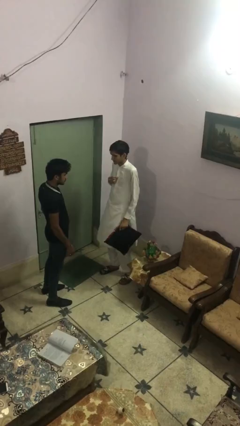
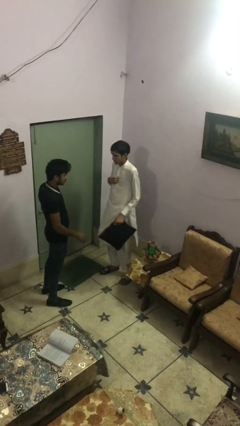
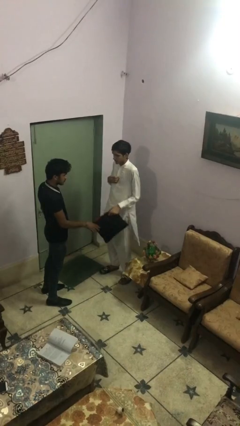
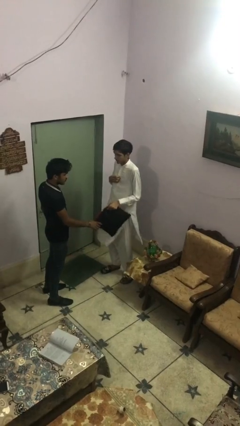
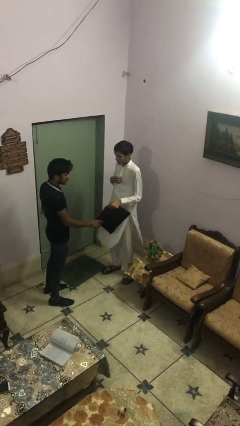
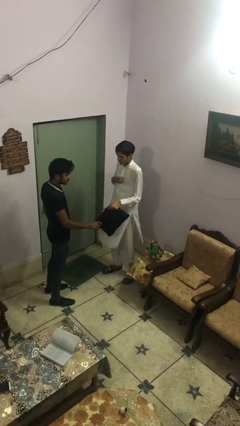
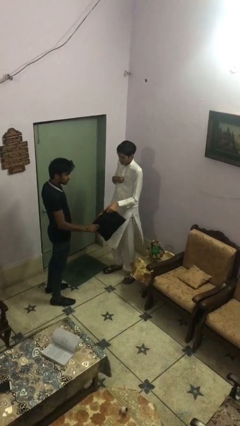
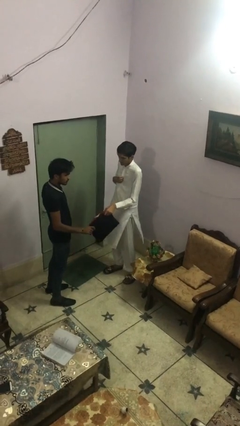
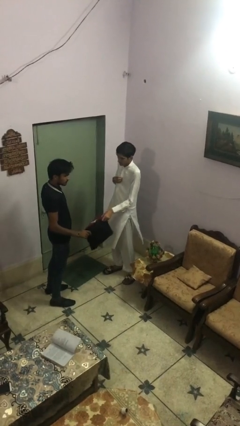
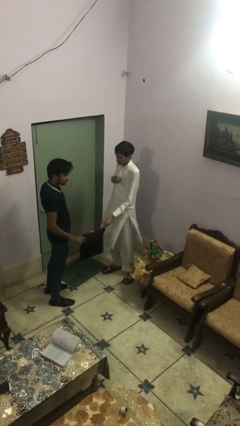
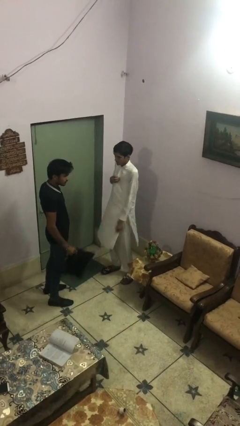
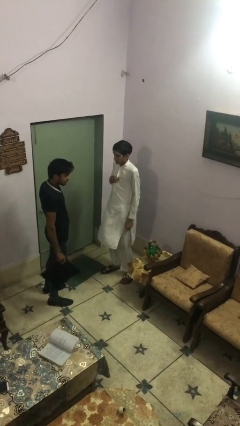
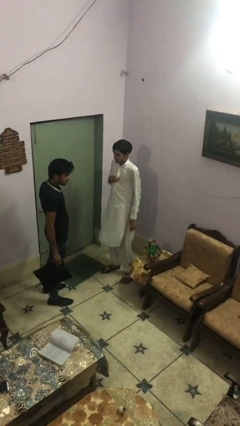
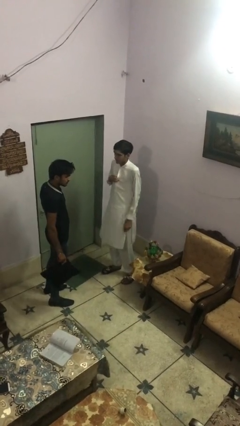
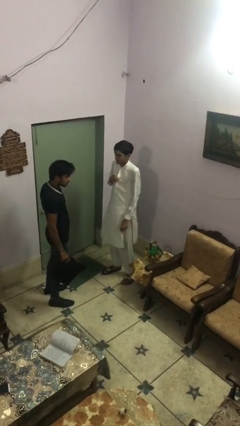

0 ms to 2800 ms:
person transfers object to person

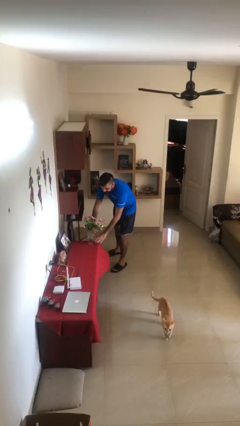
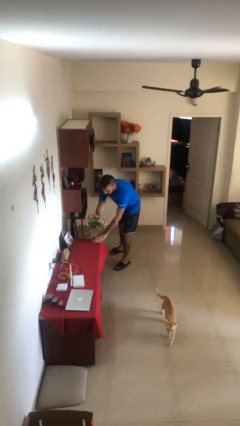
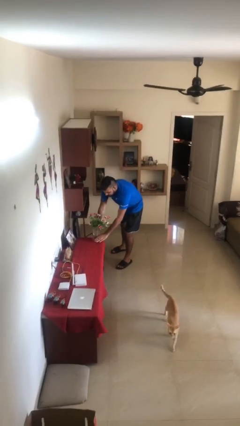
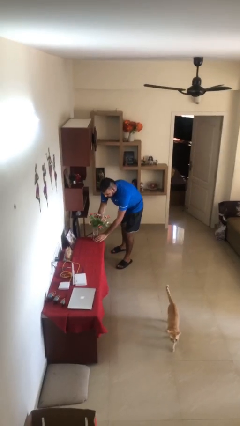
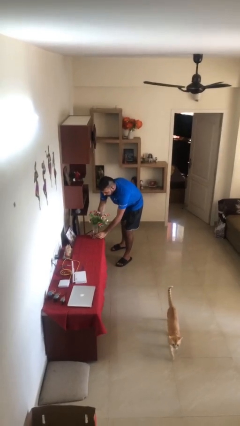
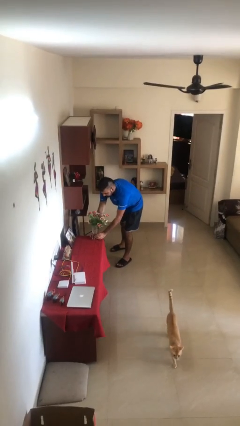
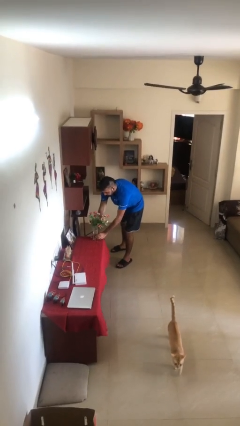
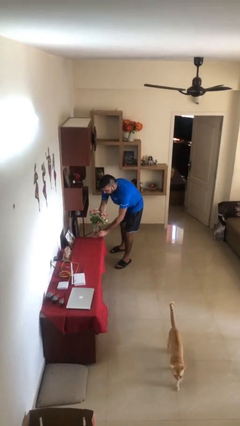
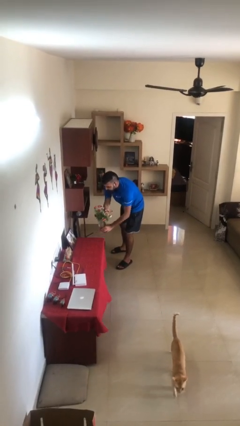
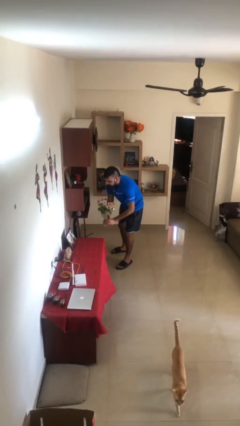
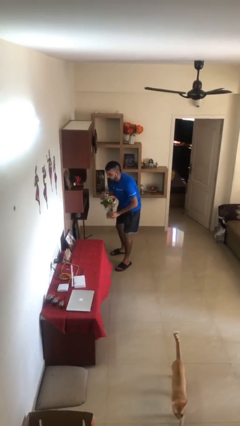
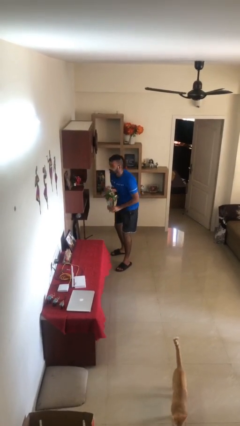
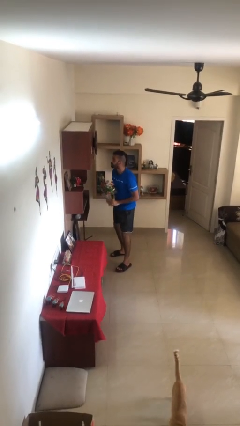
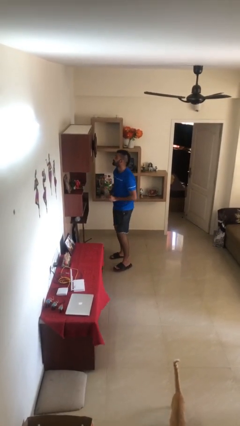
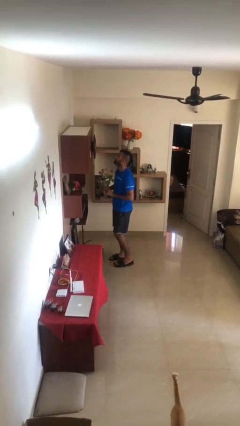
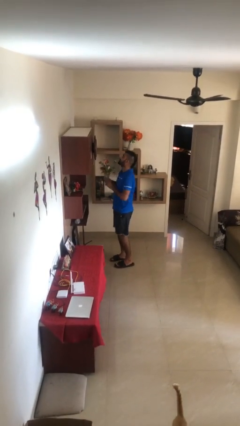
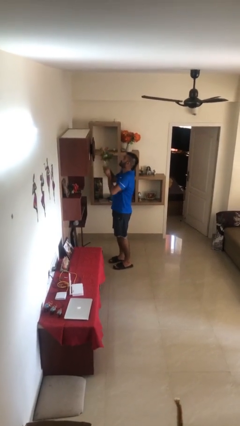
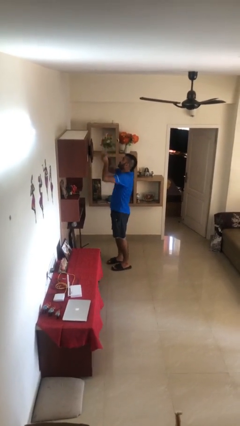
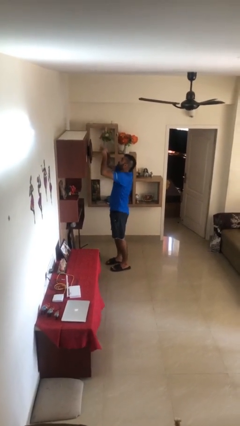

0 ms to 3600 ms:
person picks up object from table

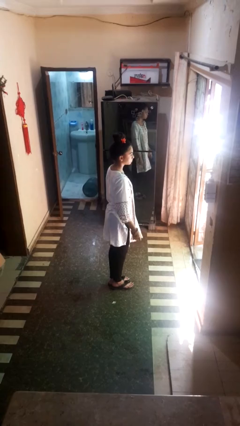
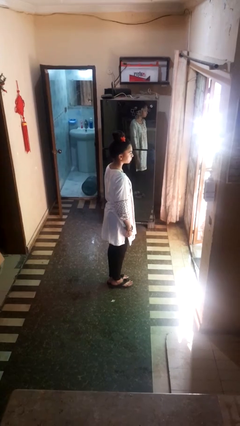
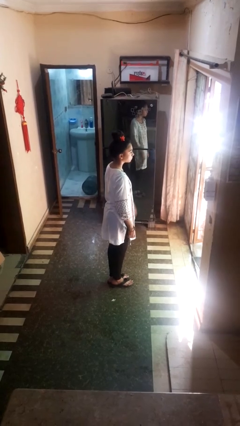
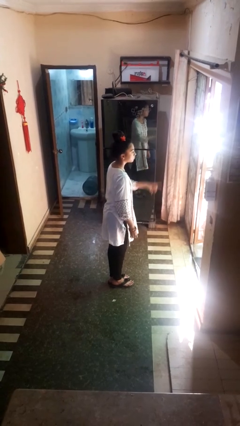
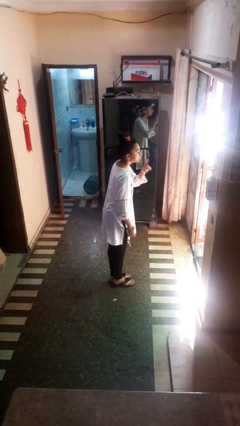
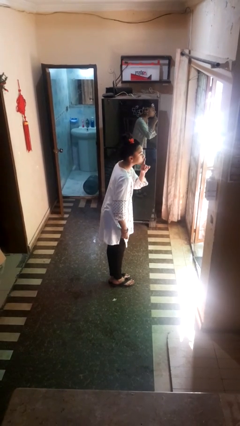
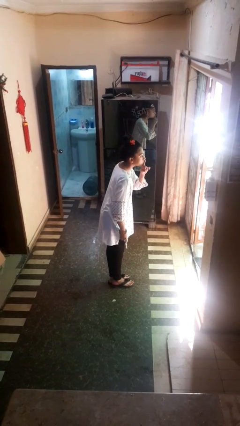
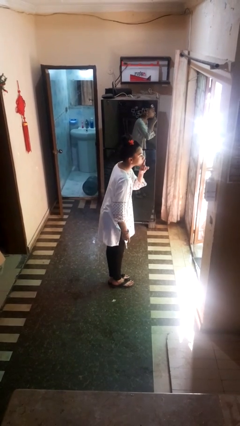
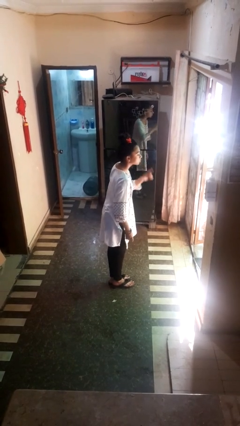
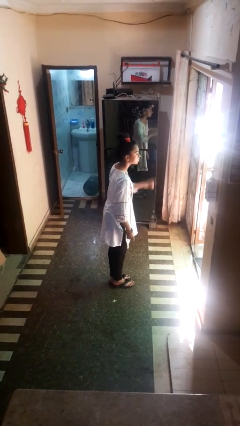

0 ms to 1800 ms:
person gestures be quiet

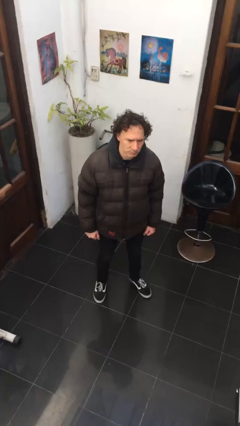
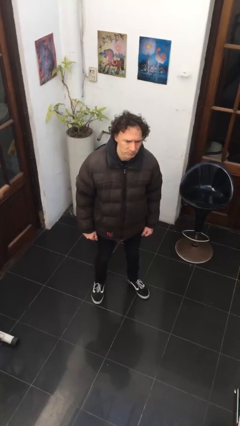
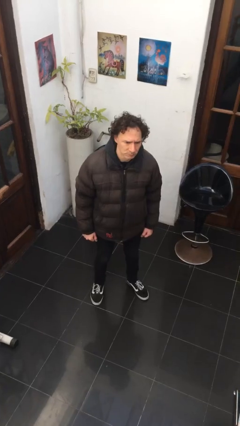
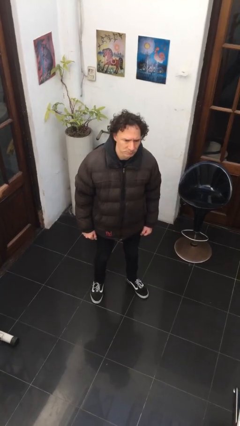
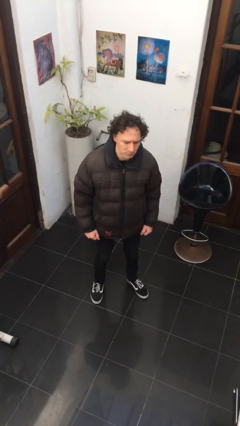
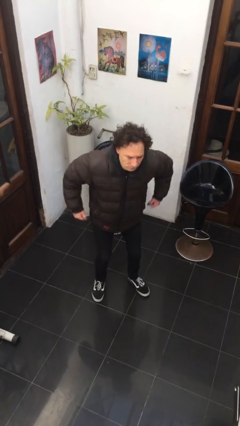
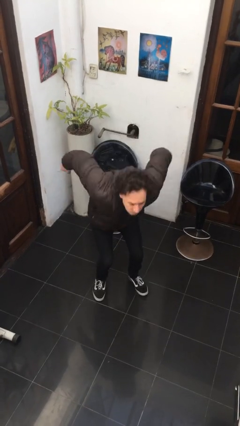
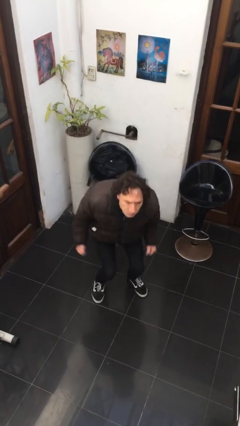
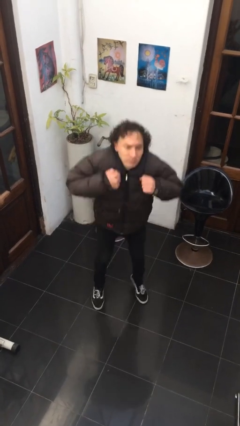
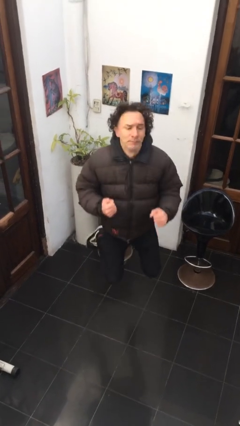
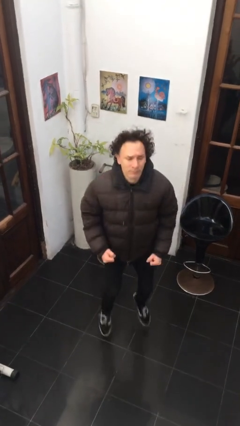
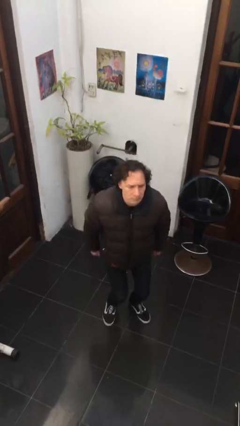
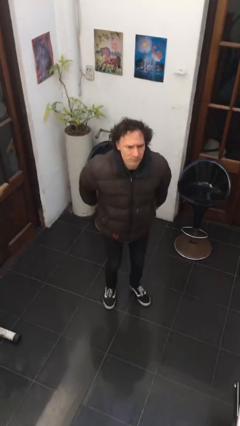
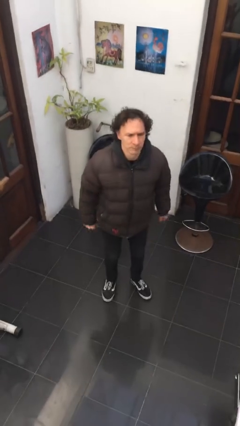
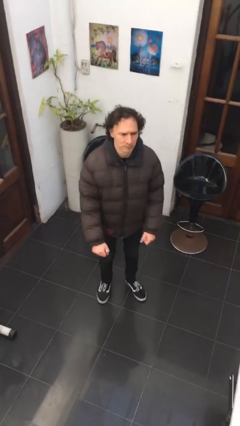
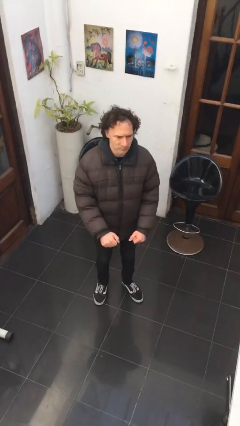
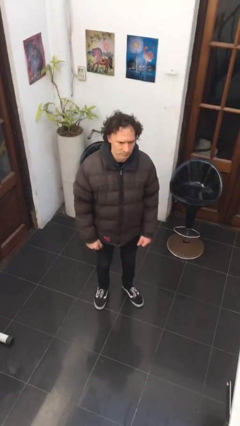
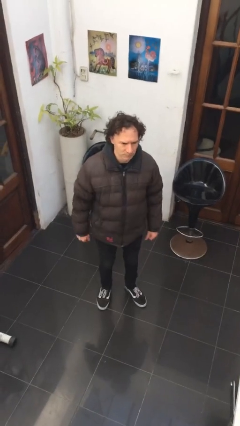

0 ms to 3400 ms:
person jumps

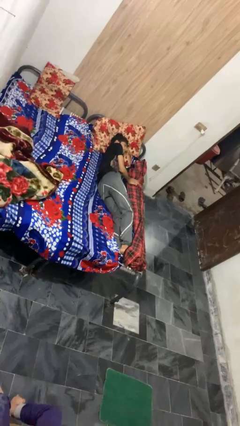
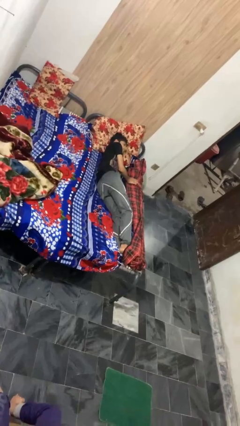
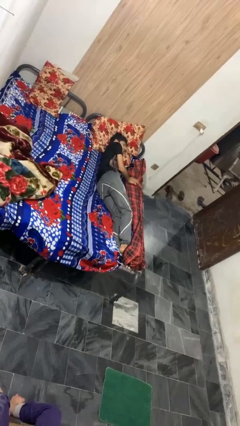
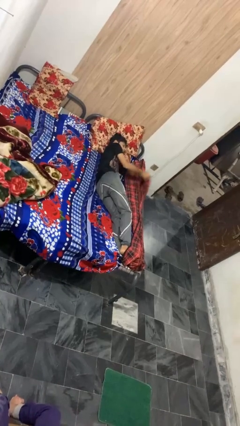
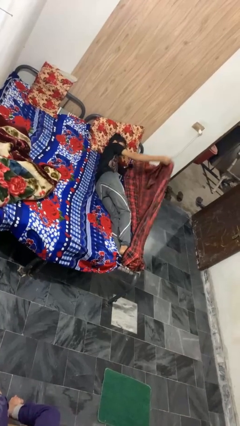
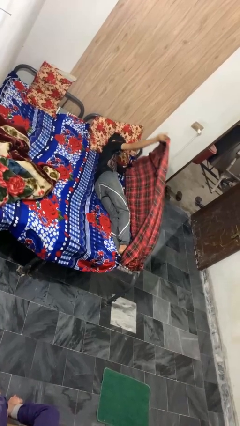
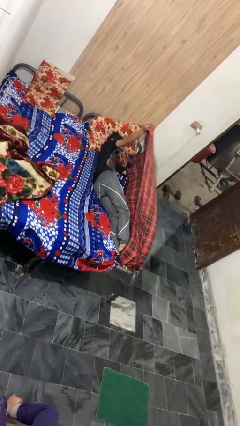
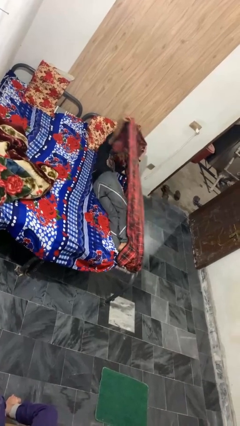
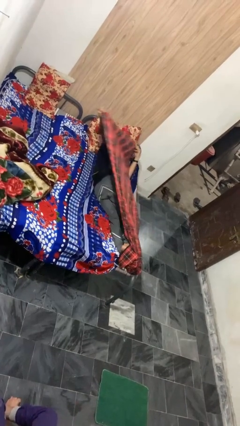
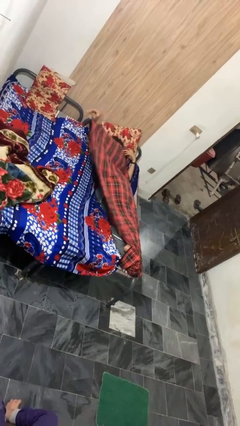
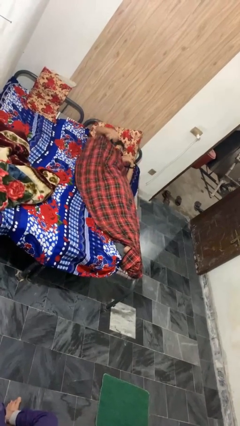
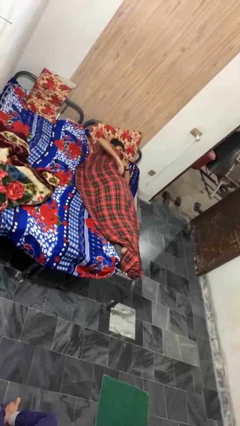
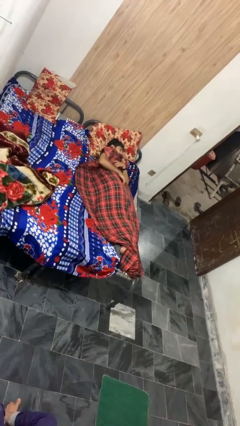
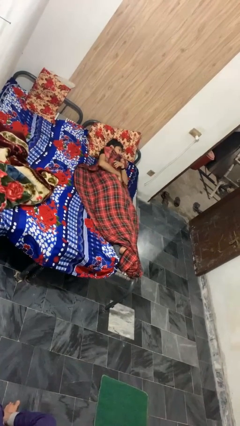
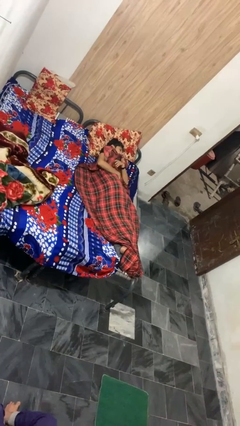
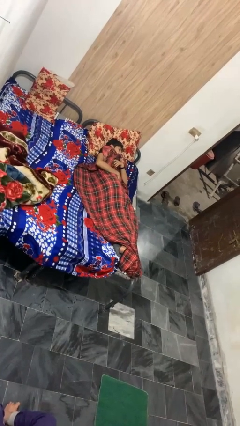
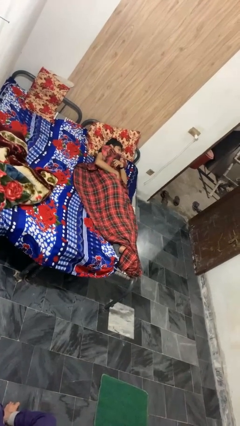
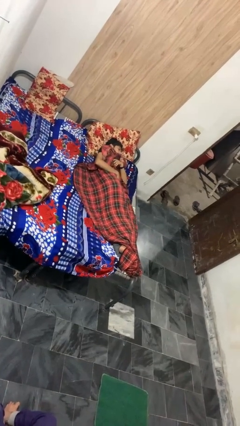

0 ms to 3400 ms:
person covers with blanket

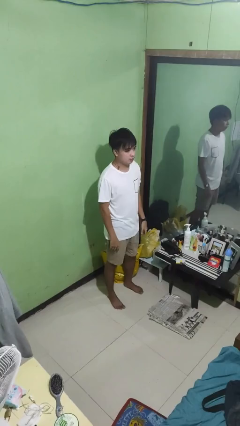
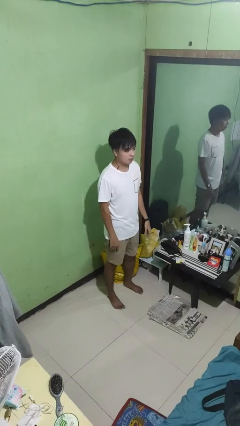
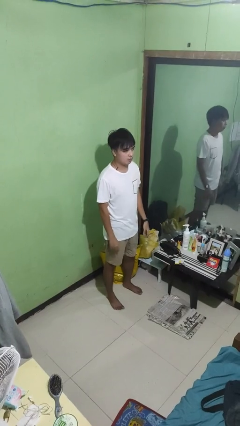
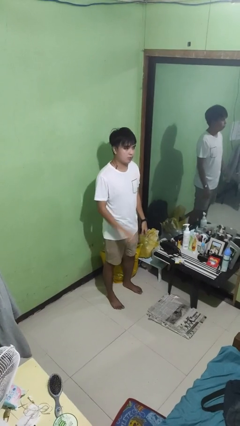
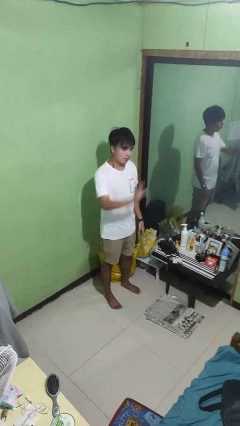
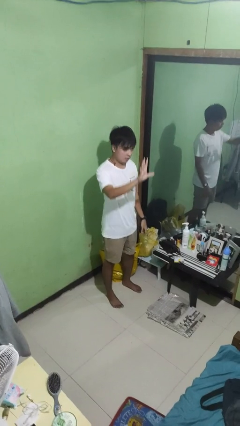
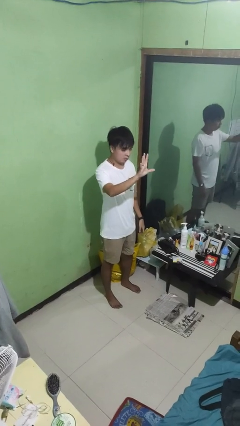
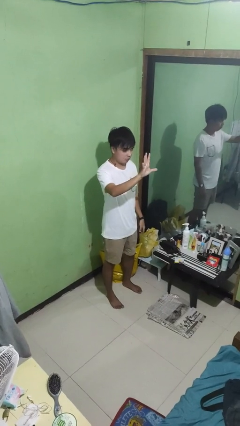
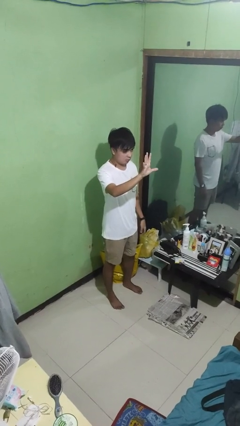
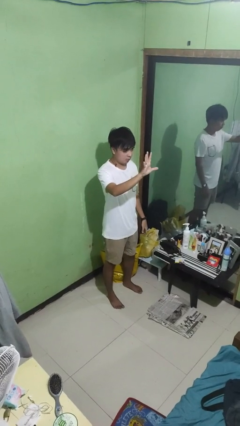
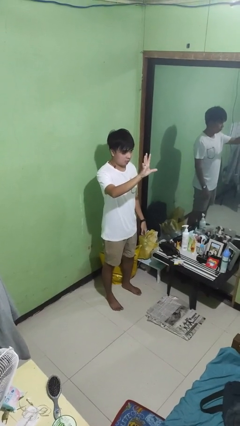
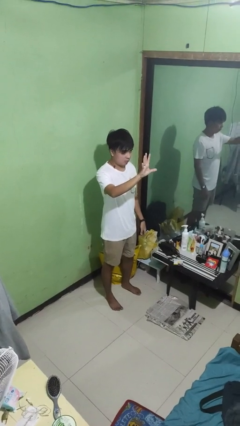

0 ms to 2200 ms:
person gestures number five

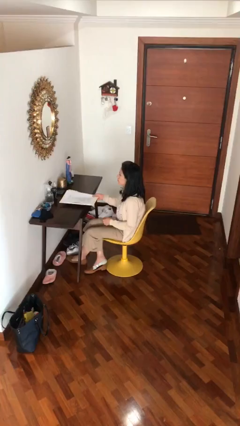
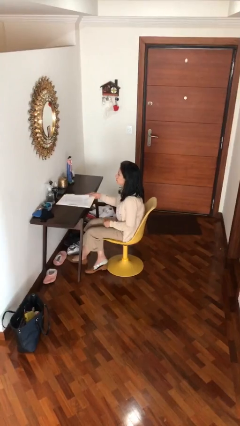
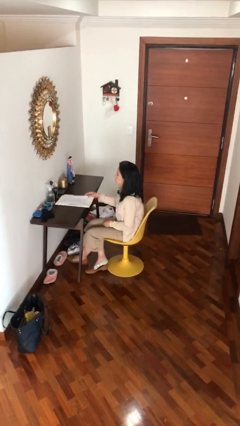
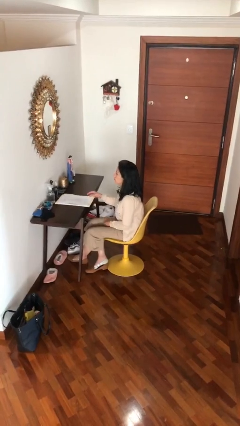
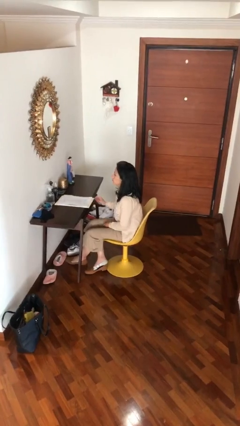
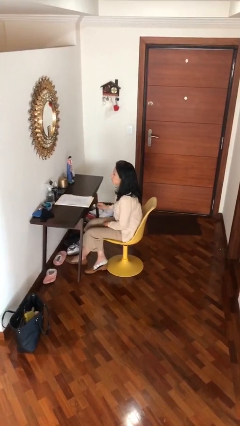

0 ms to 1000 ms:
person puts down object on table
